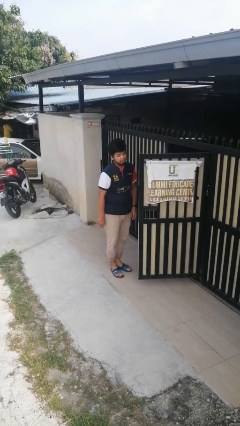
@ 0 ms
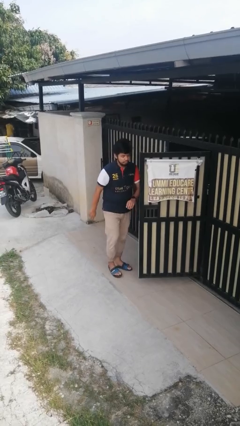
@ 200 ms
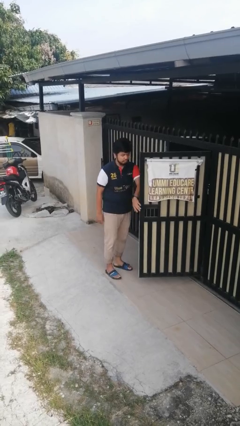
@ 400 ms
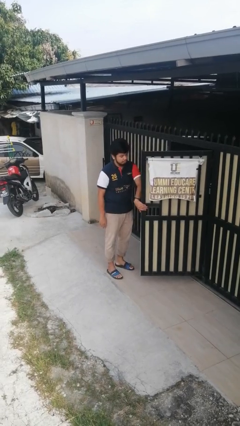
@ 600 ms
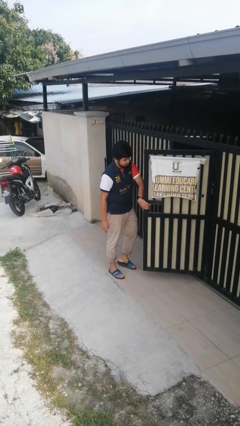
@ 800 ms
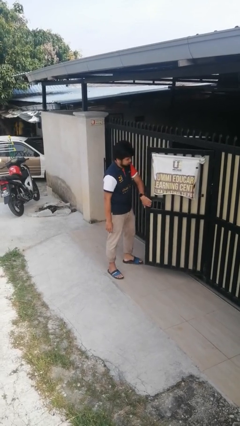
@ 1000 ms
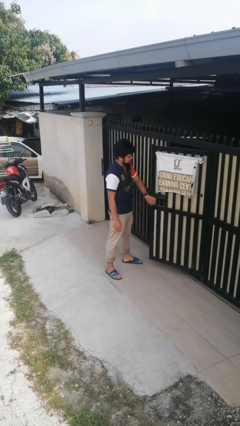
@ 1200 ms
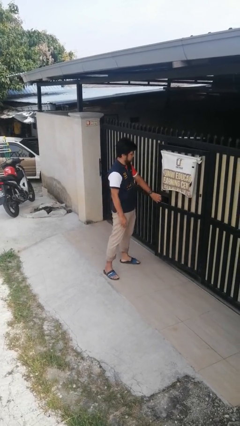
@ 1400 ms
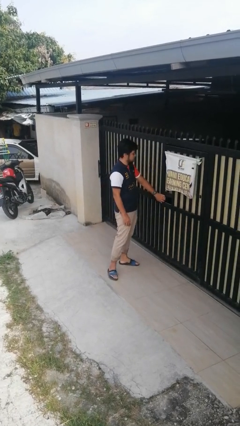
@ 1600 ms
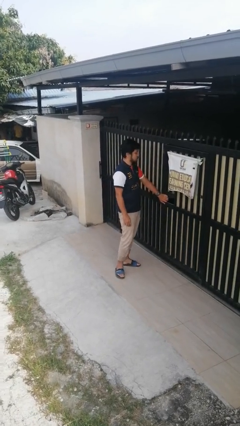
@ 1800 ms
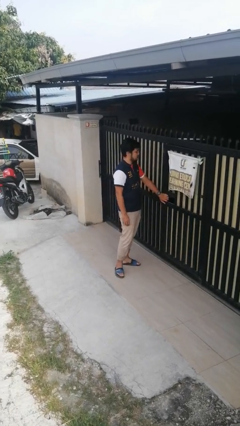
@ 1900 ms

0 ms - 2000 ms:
person closes gate

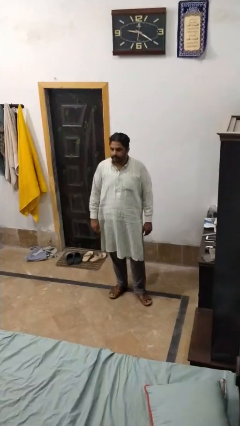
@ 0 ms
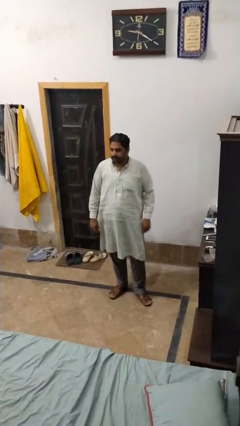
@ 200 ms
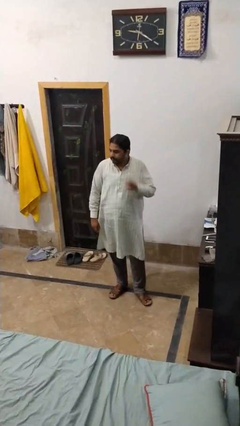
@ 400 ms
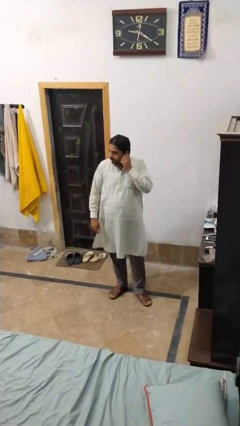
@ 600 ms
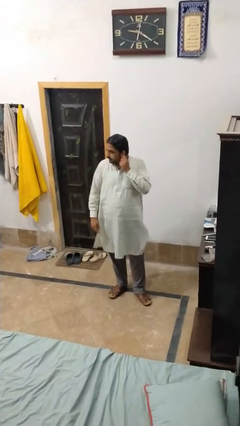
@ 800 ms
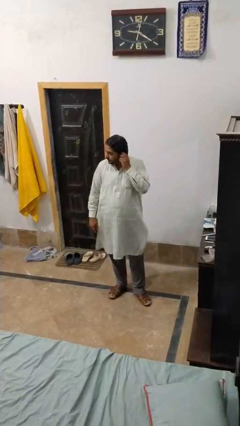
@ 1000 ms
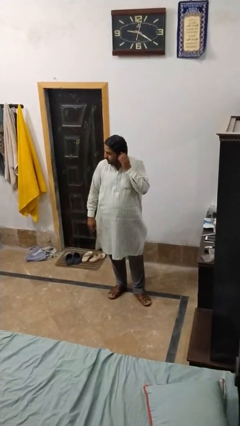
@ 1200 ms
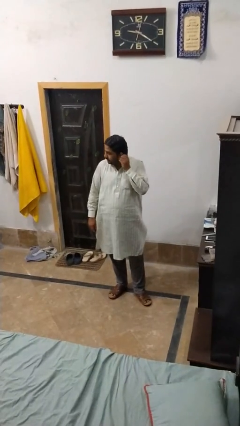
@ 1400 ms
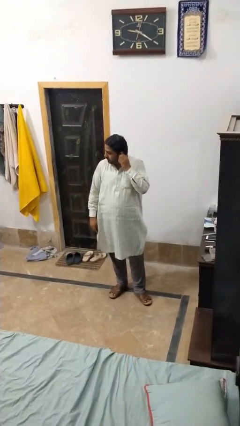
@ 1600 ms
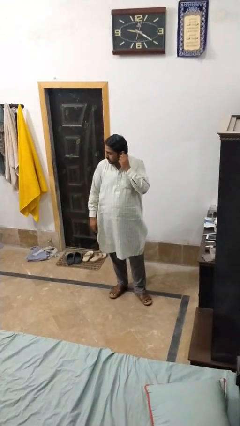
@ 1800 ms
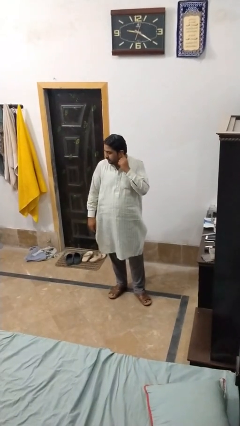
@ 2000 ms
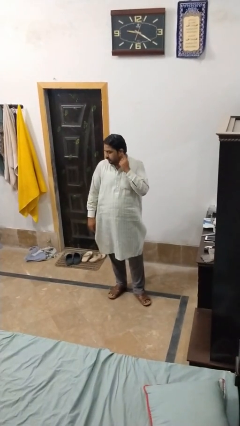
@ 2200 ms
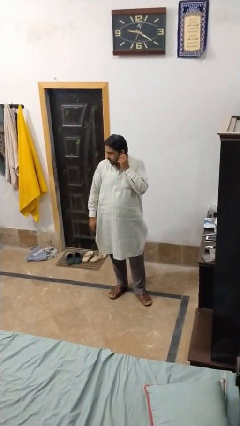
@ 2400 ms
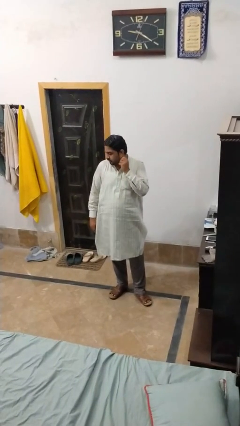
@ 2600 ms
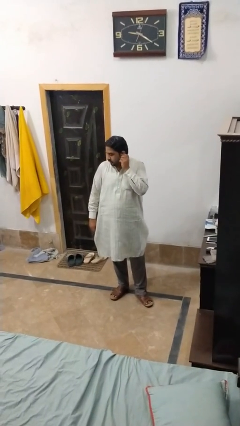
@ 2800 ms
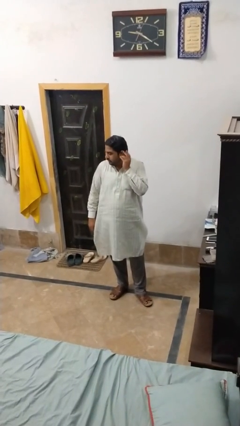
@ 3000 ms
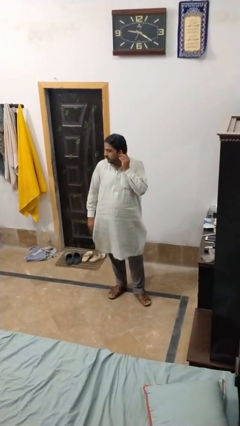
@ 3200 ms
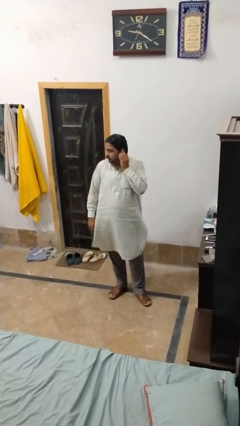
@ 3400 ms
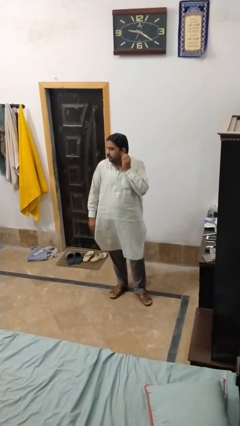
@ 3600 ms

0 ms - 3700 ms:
person touches earlobe

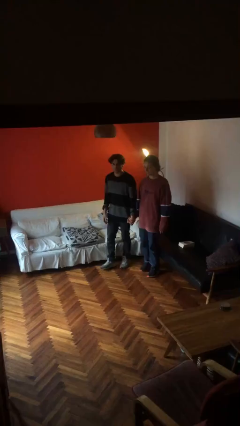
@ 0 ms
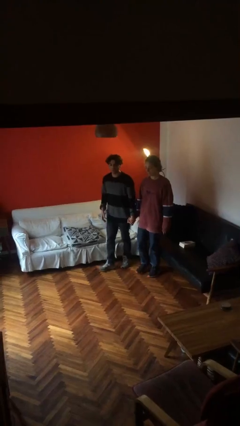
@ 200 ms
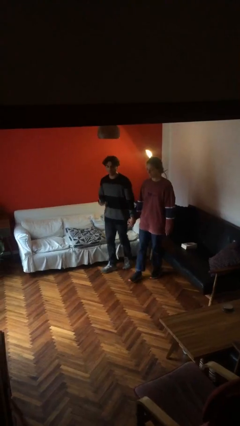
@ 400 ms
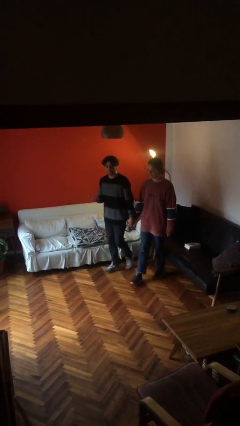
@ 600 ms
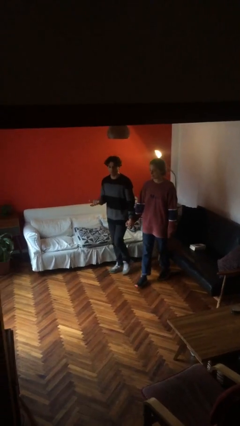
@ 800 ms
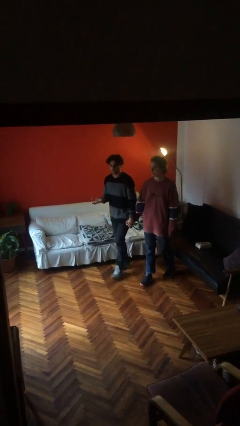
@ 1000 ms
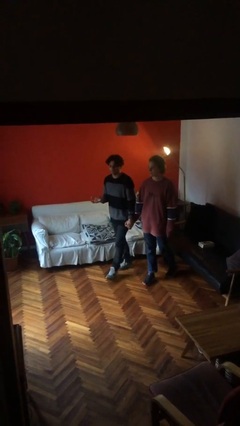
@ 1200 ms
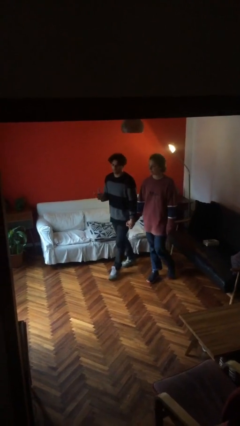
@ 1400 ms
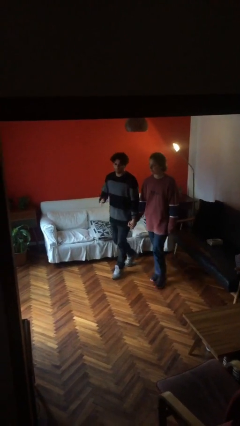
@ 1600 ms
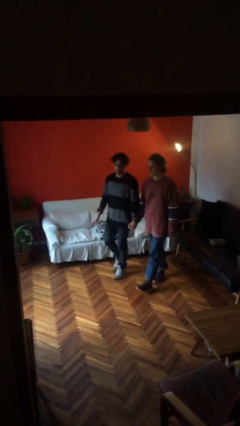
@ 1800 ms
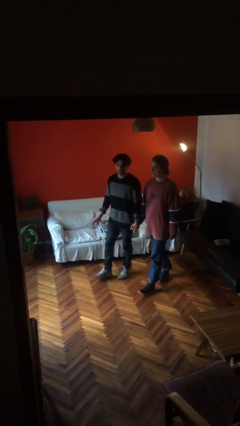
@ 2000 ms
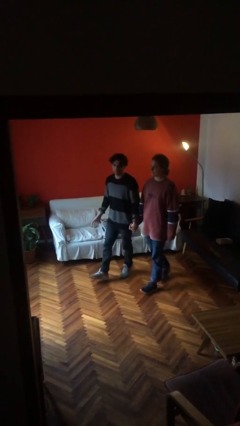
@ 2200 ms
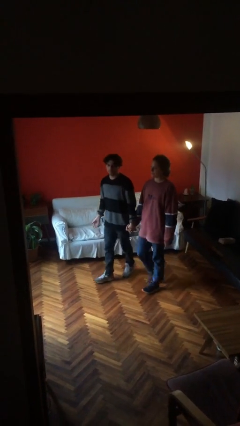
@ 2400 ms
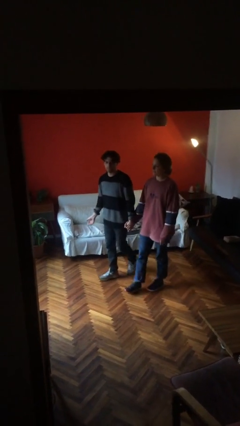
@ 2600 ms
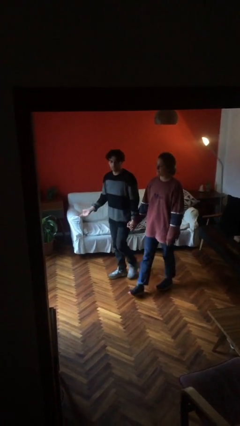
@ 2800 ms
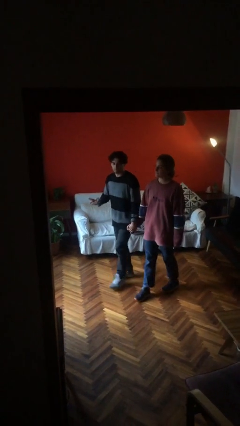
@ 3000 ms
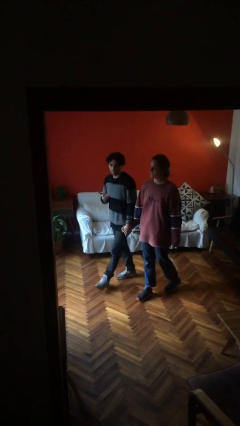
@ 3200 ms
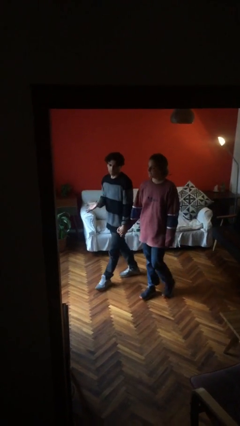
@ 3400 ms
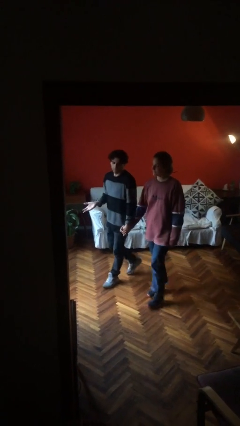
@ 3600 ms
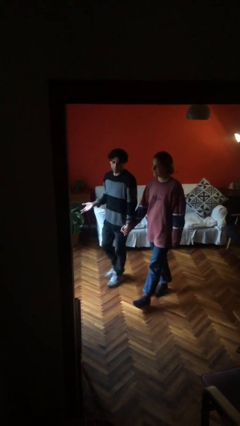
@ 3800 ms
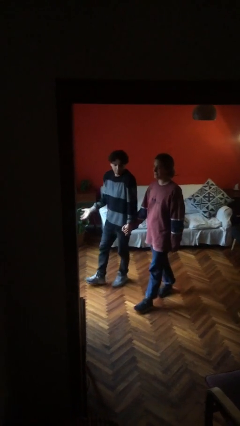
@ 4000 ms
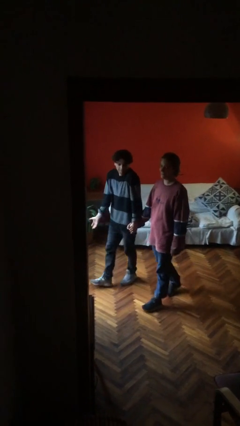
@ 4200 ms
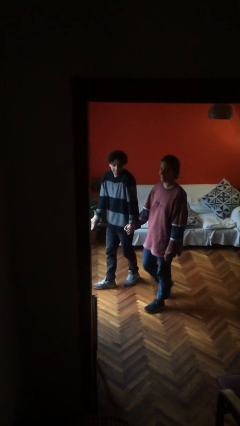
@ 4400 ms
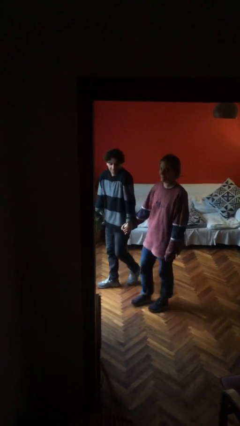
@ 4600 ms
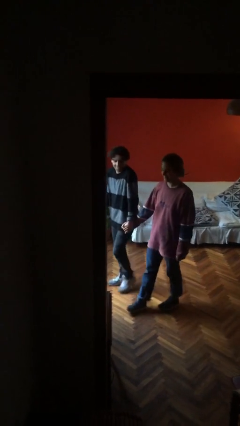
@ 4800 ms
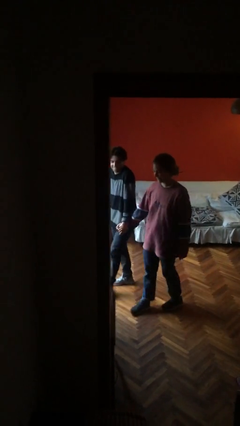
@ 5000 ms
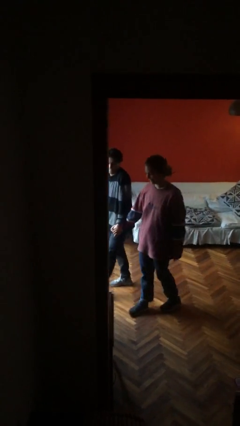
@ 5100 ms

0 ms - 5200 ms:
person holds hand

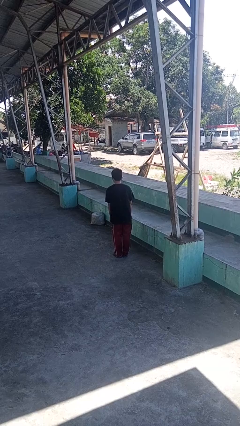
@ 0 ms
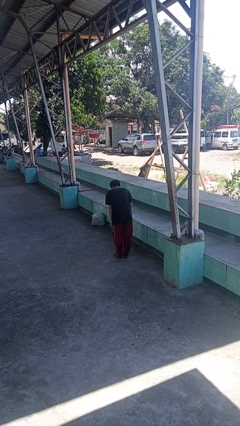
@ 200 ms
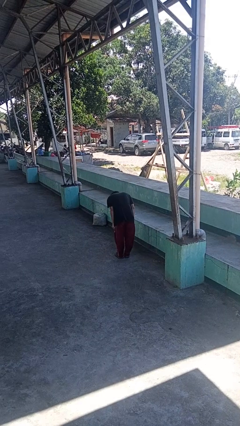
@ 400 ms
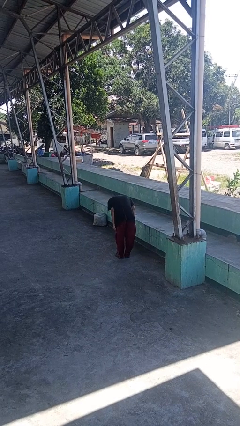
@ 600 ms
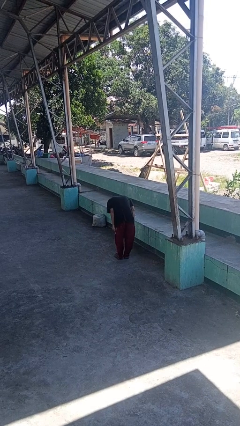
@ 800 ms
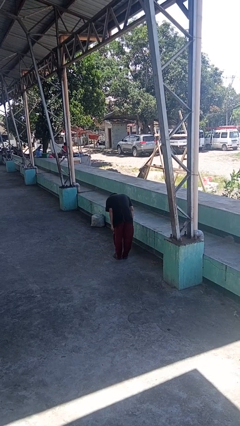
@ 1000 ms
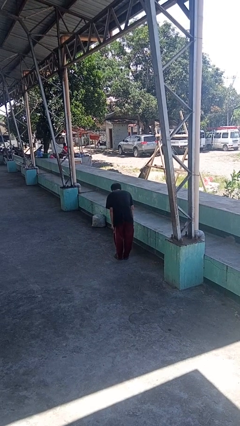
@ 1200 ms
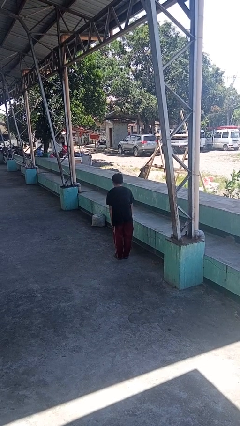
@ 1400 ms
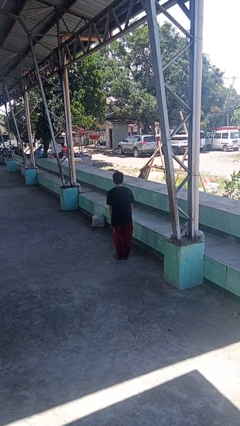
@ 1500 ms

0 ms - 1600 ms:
person bows

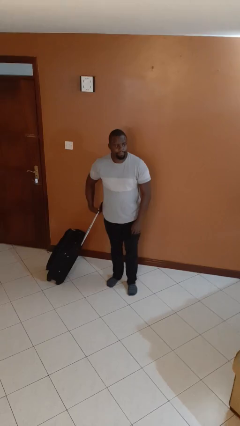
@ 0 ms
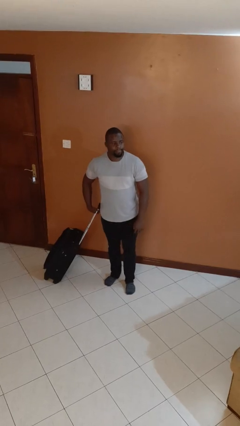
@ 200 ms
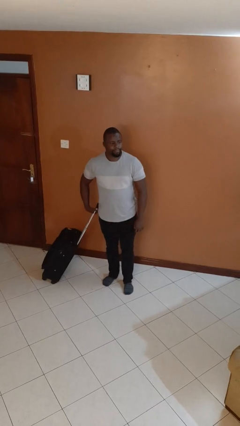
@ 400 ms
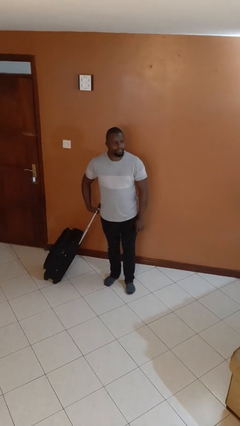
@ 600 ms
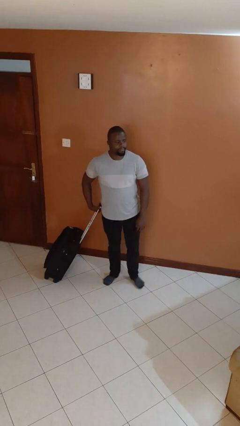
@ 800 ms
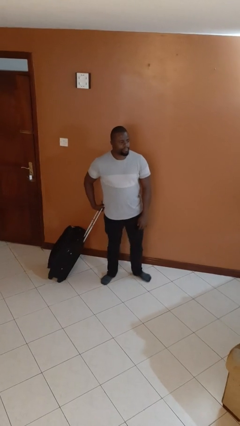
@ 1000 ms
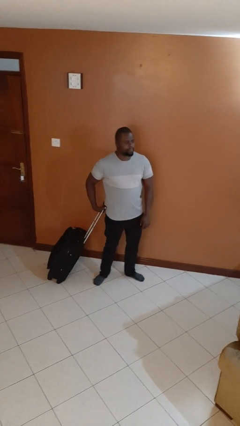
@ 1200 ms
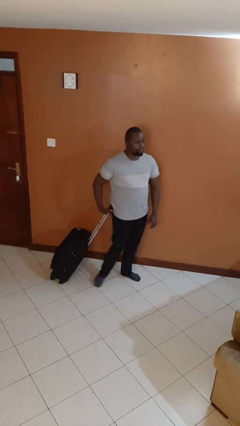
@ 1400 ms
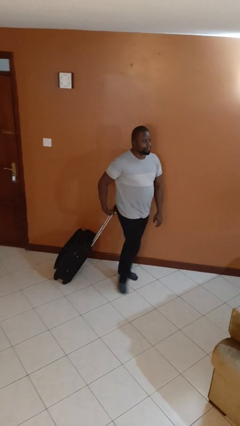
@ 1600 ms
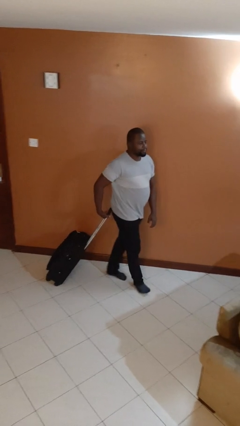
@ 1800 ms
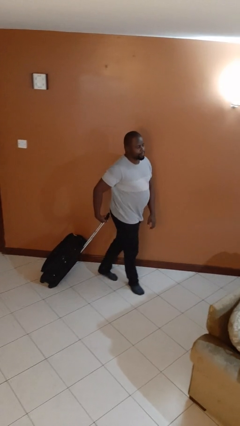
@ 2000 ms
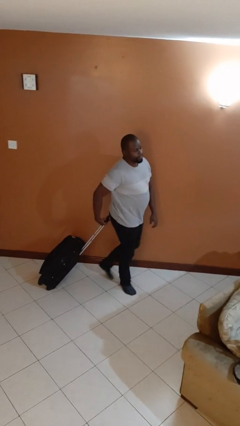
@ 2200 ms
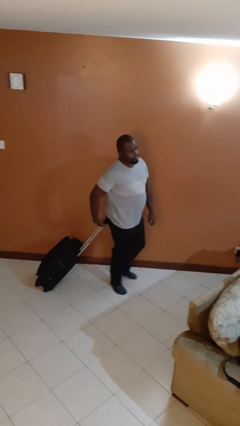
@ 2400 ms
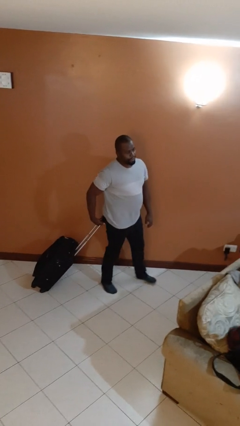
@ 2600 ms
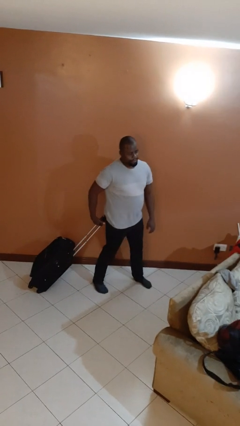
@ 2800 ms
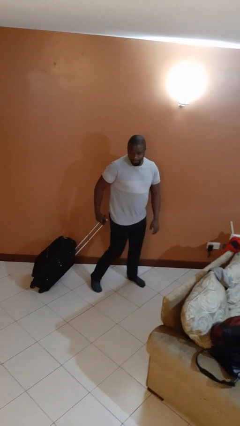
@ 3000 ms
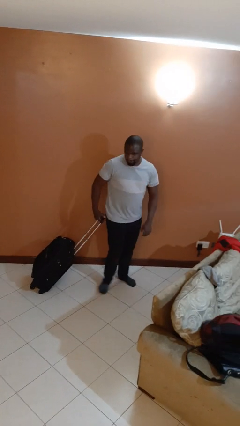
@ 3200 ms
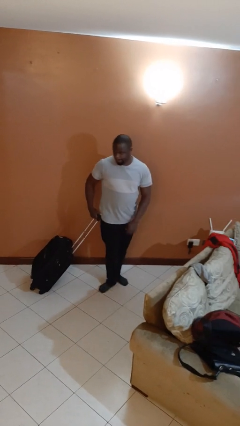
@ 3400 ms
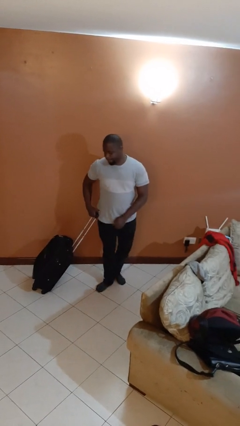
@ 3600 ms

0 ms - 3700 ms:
person pulls wheeled cart

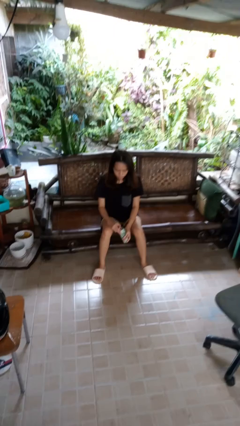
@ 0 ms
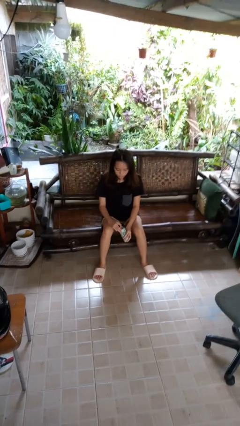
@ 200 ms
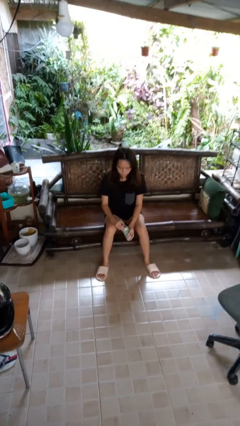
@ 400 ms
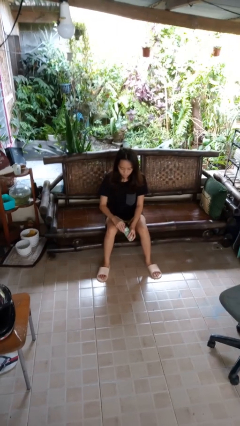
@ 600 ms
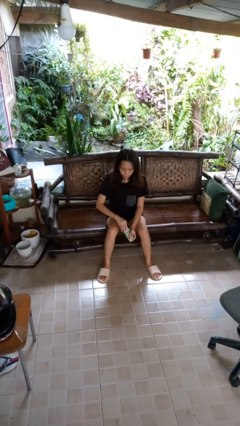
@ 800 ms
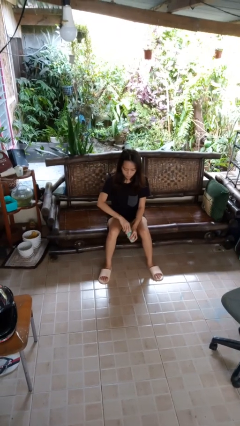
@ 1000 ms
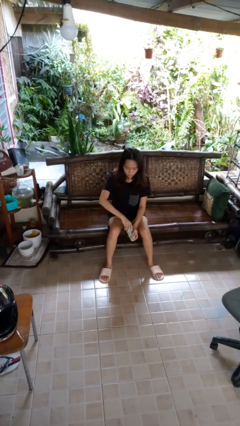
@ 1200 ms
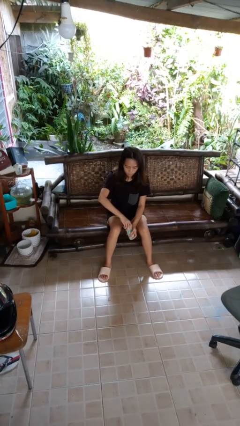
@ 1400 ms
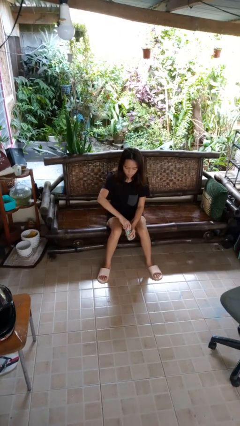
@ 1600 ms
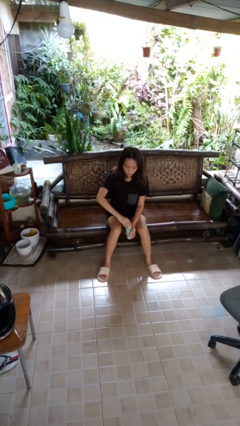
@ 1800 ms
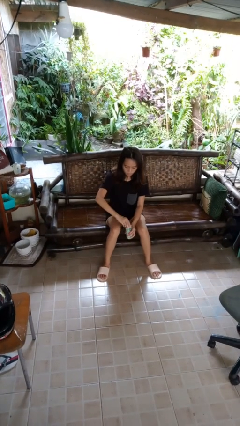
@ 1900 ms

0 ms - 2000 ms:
person opens beverage can
